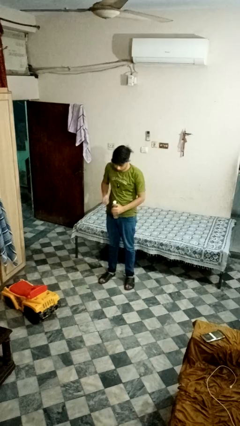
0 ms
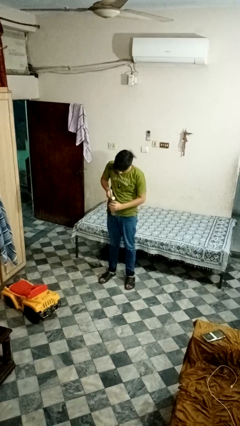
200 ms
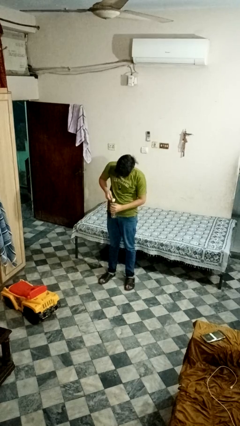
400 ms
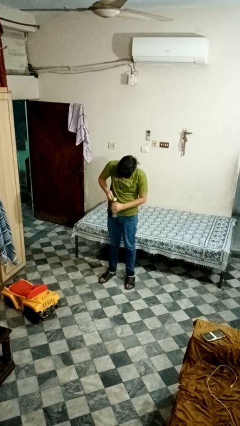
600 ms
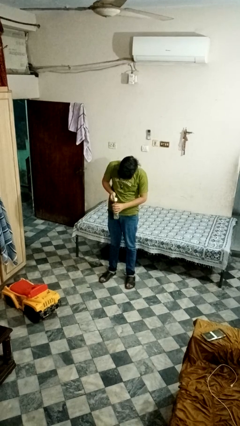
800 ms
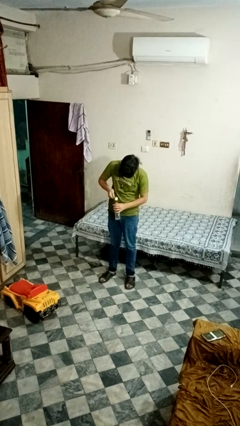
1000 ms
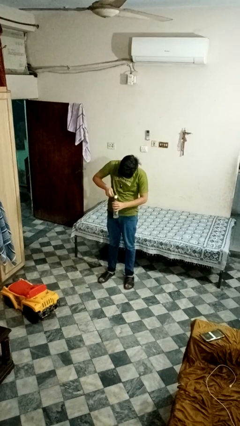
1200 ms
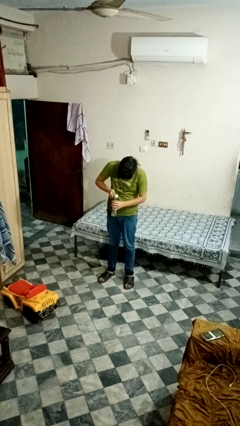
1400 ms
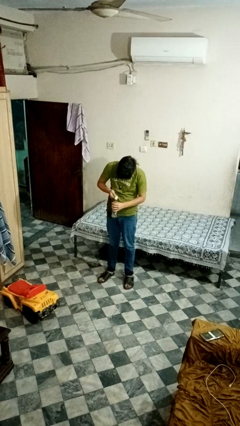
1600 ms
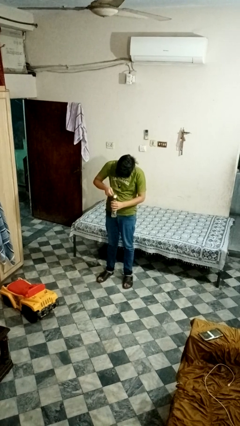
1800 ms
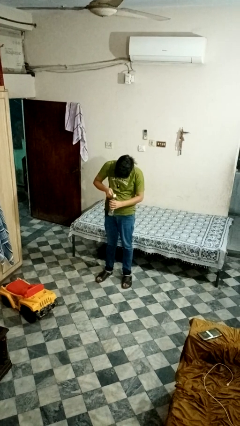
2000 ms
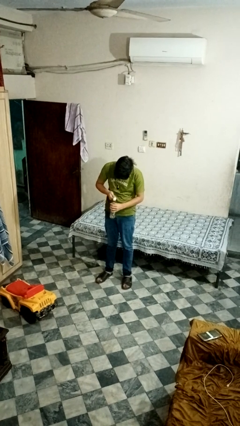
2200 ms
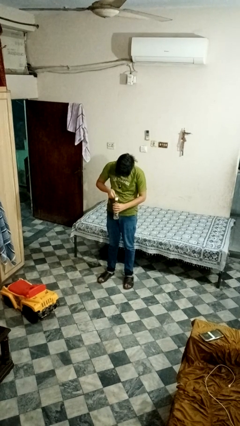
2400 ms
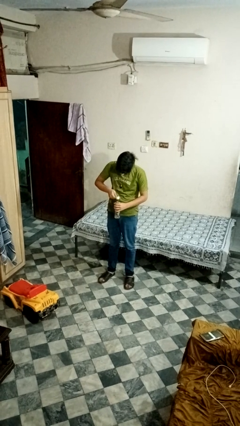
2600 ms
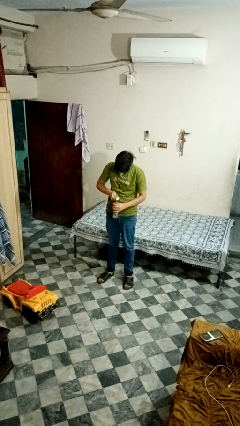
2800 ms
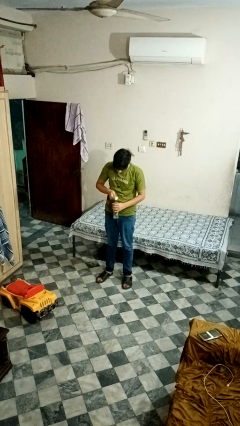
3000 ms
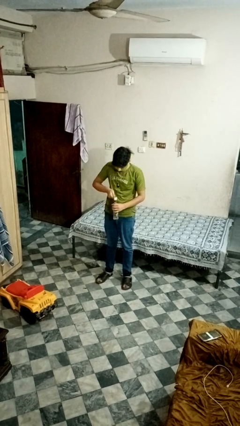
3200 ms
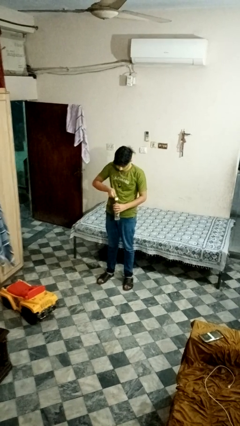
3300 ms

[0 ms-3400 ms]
person opens can with can opener

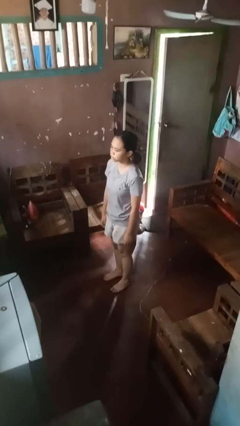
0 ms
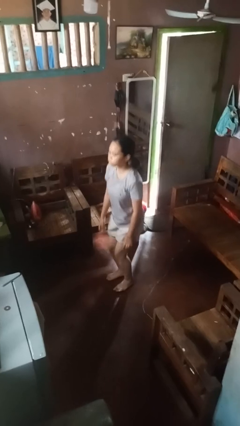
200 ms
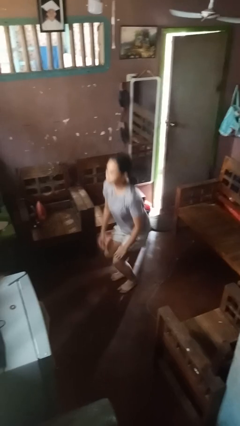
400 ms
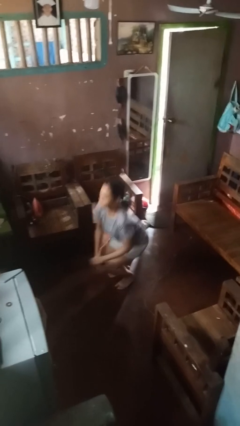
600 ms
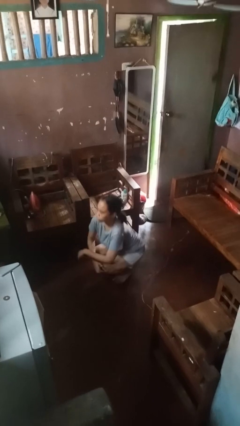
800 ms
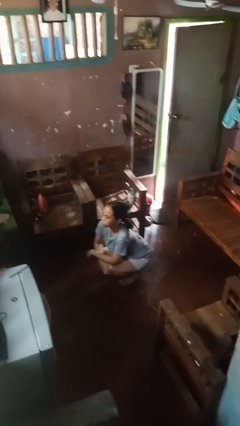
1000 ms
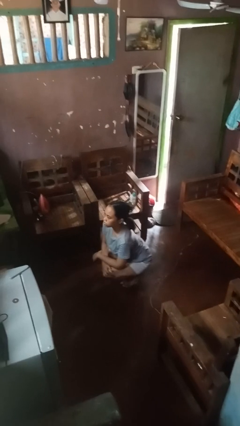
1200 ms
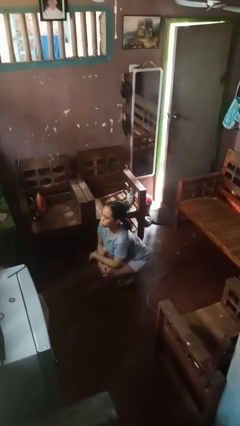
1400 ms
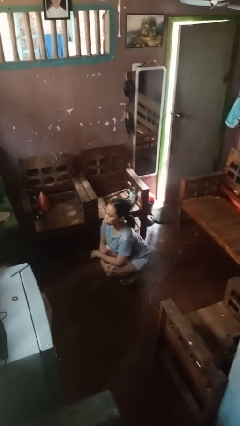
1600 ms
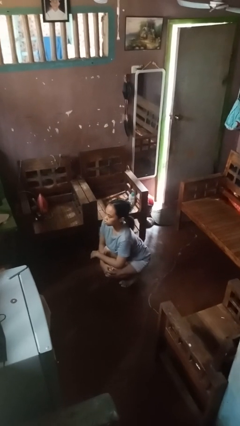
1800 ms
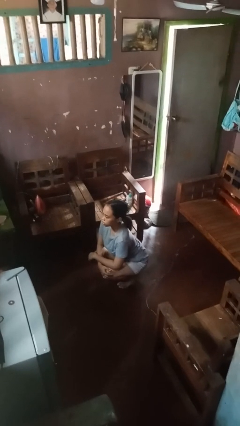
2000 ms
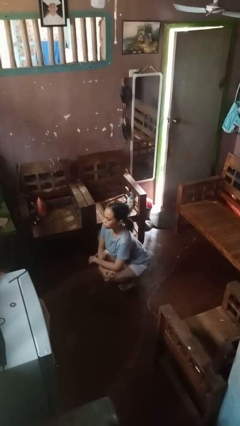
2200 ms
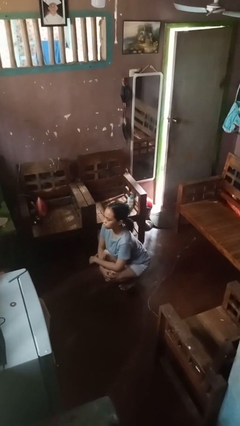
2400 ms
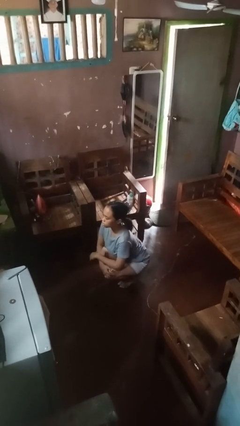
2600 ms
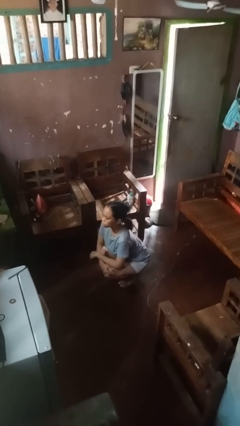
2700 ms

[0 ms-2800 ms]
person squats

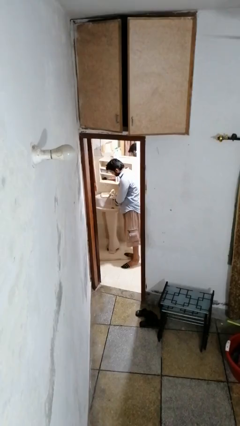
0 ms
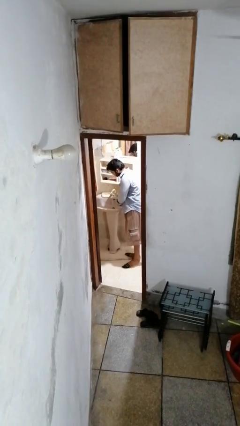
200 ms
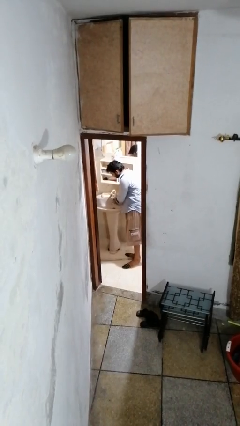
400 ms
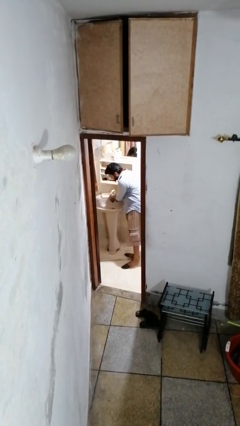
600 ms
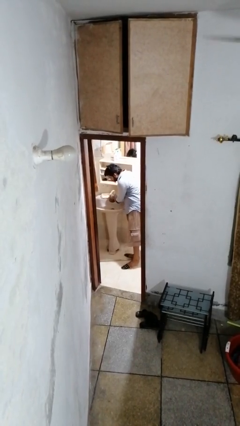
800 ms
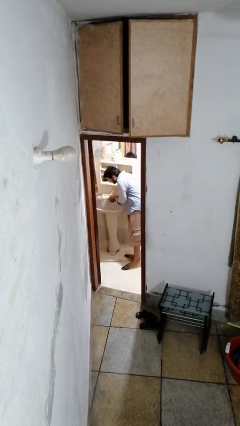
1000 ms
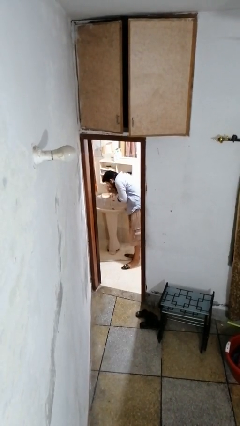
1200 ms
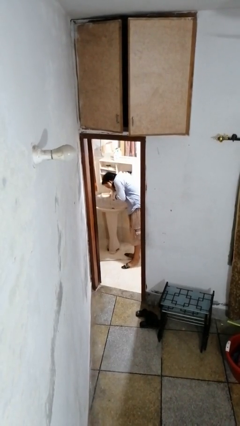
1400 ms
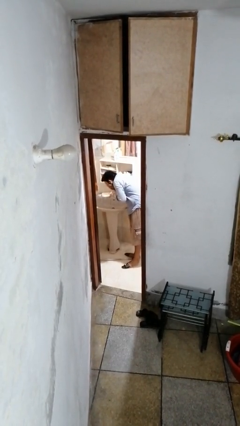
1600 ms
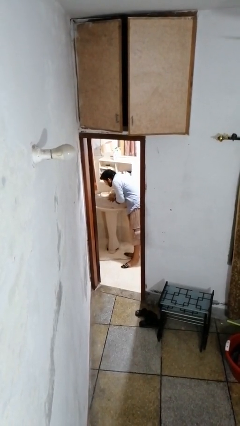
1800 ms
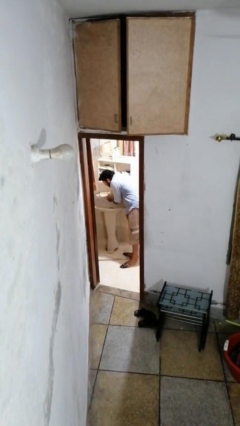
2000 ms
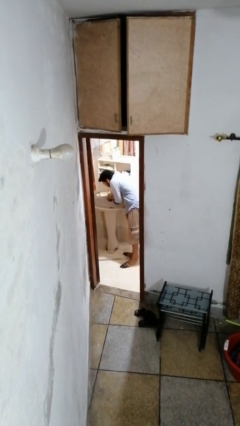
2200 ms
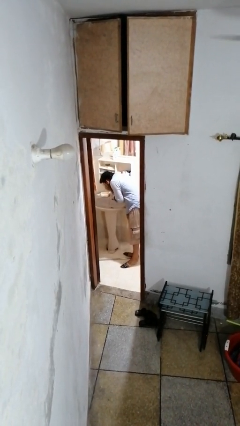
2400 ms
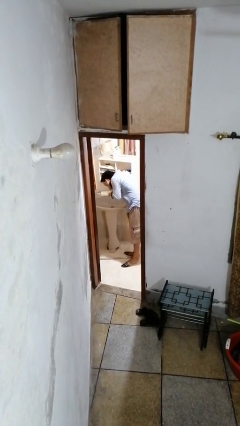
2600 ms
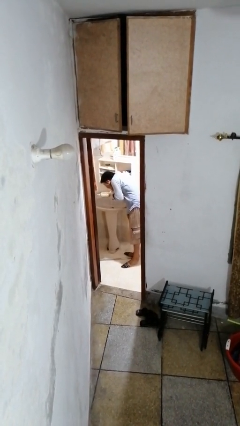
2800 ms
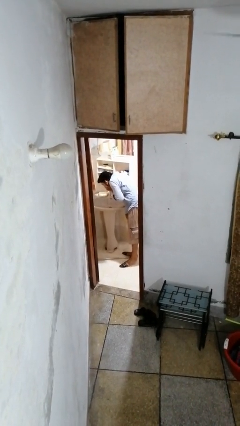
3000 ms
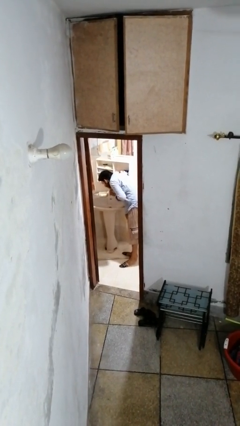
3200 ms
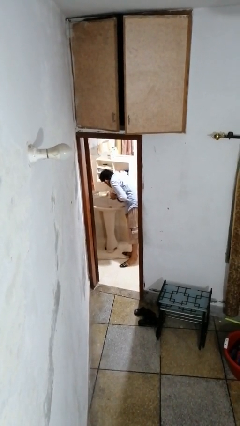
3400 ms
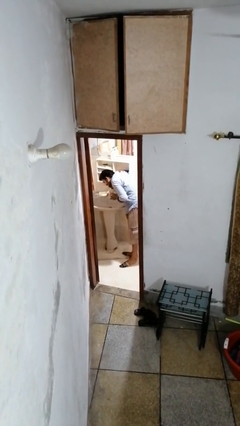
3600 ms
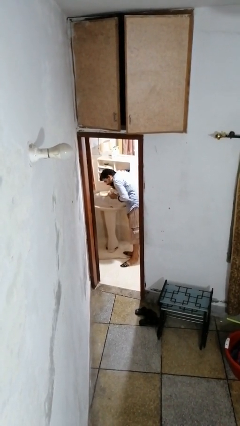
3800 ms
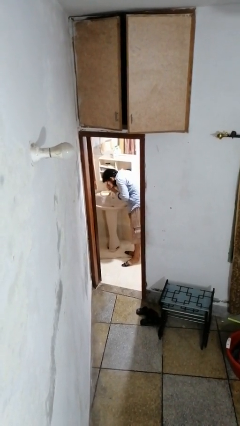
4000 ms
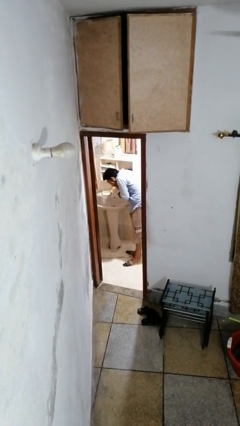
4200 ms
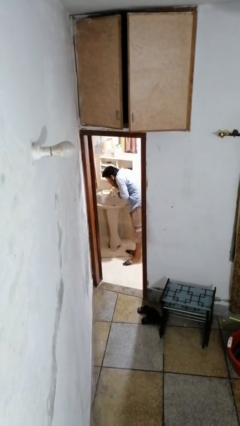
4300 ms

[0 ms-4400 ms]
person washes face

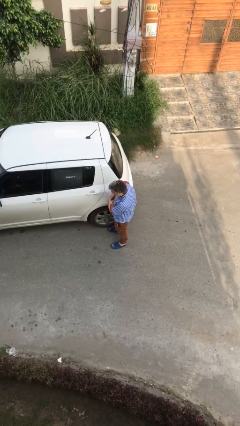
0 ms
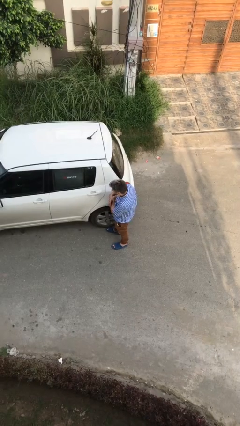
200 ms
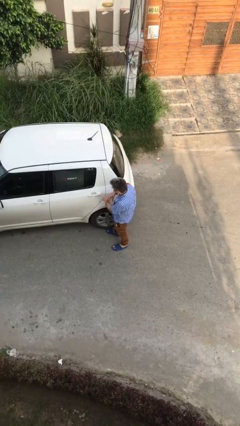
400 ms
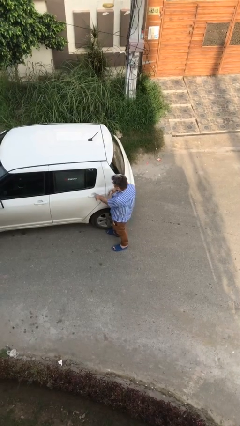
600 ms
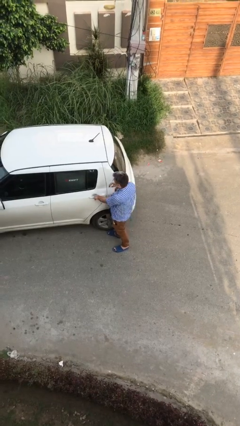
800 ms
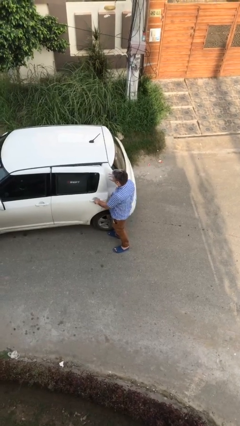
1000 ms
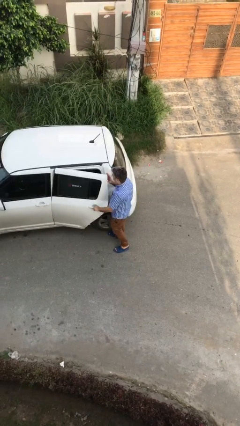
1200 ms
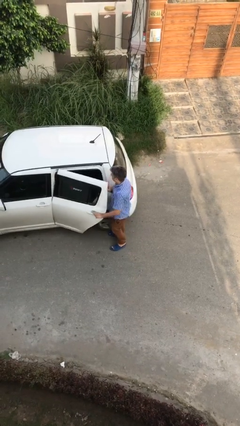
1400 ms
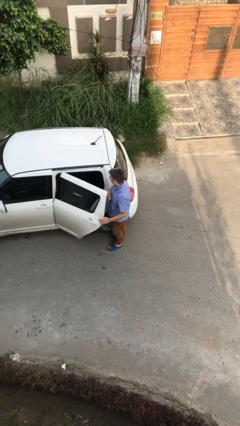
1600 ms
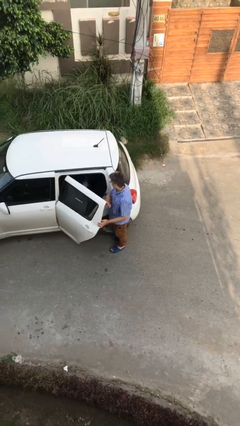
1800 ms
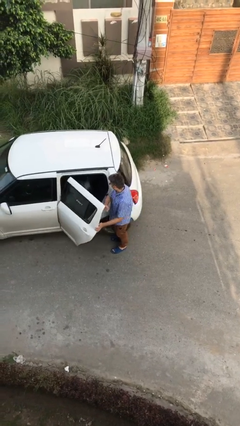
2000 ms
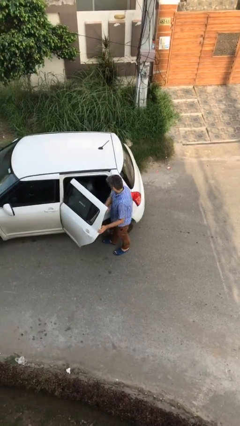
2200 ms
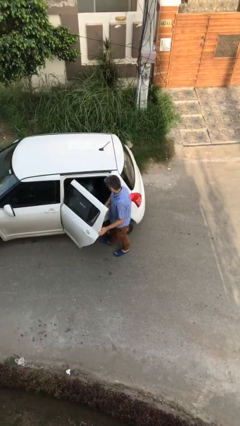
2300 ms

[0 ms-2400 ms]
person opens car door

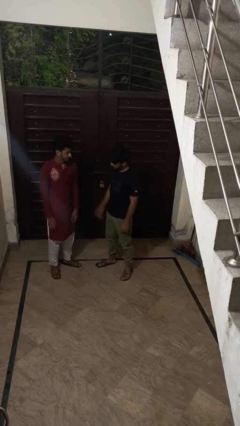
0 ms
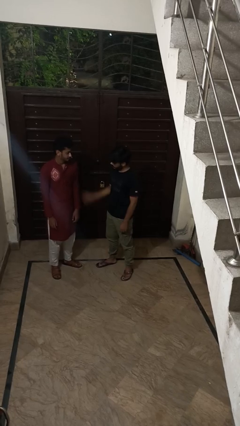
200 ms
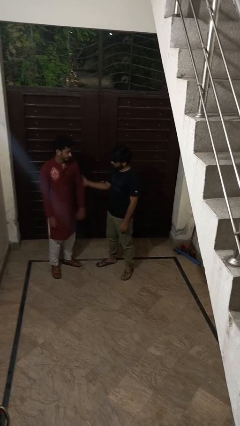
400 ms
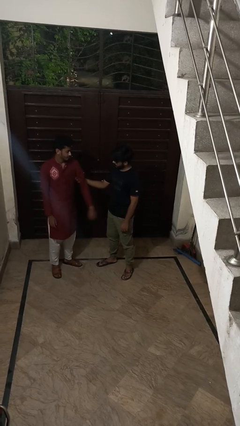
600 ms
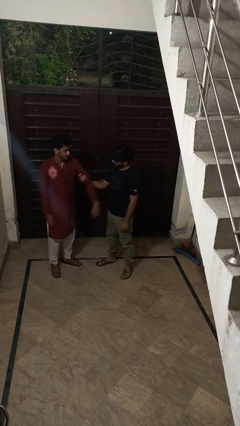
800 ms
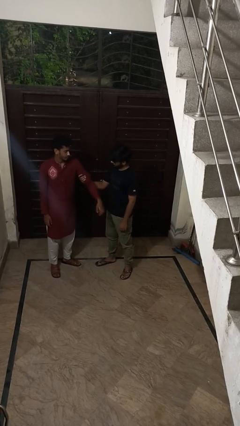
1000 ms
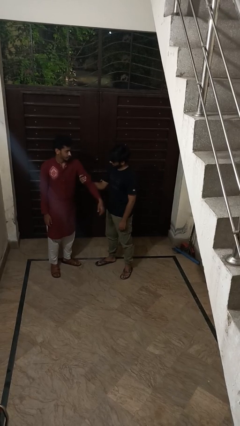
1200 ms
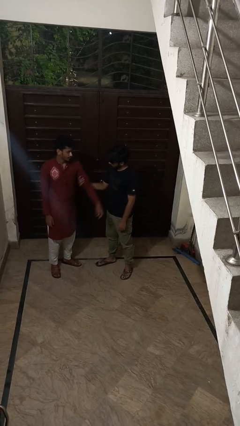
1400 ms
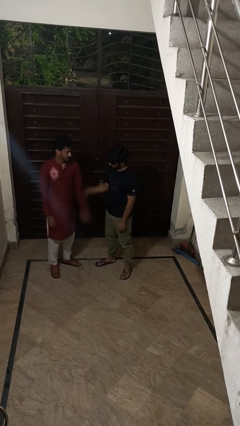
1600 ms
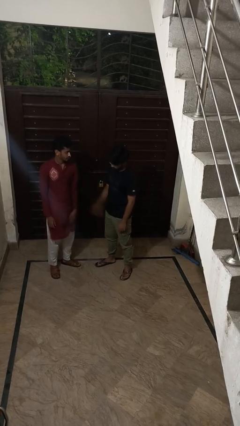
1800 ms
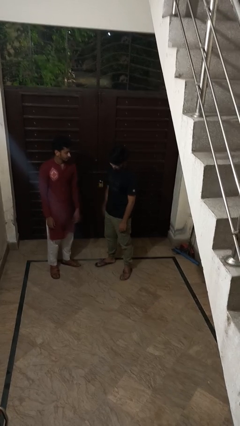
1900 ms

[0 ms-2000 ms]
person grabs person by bicep

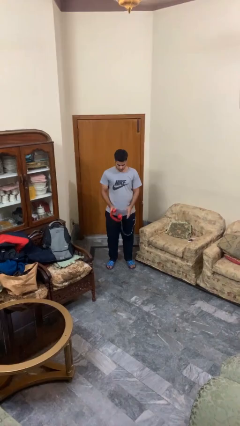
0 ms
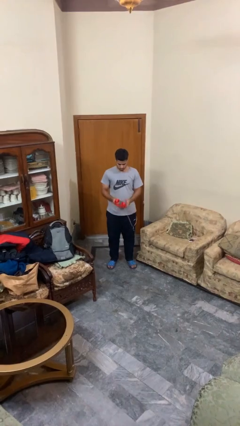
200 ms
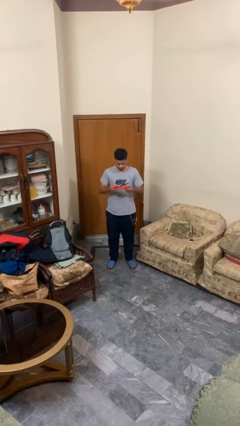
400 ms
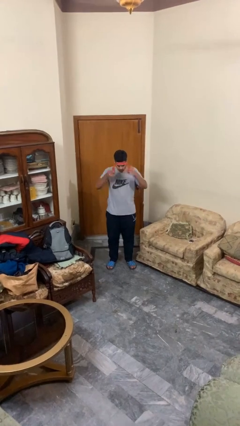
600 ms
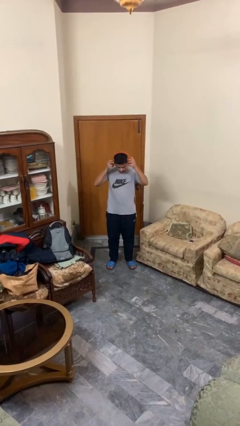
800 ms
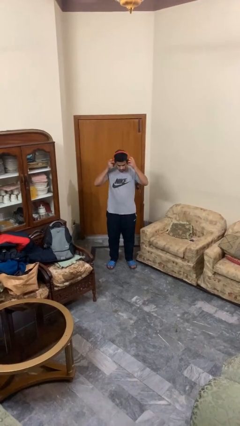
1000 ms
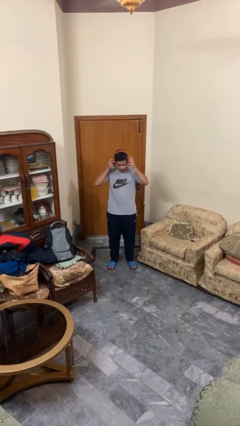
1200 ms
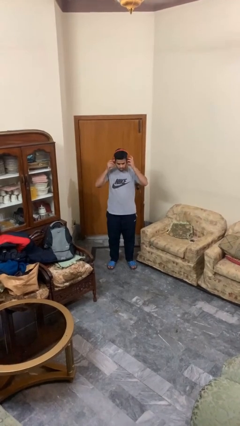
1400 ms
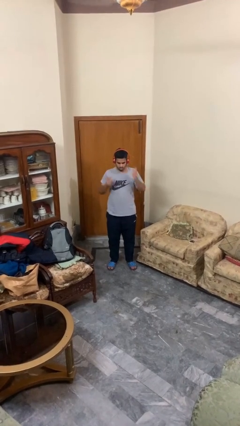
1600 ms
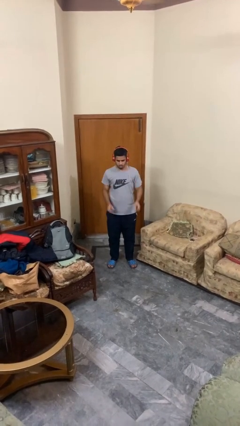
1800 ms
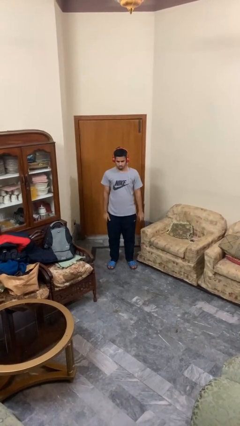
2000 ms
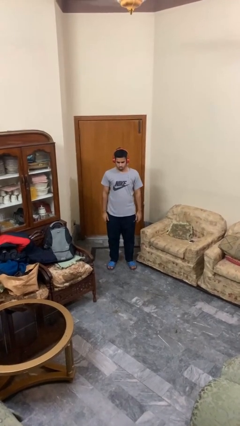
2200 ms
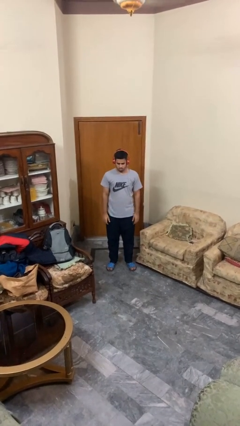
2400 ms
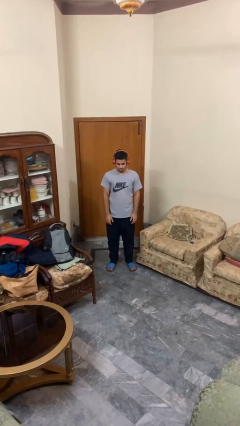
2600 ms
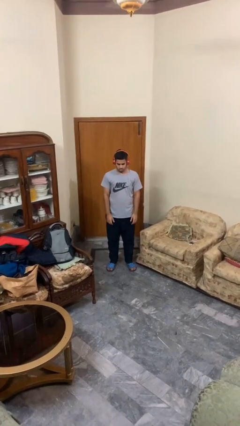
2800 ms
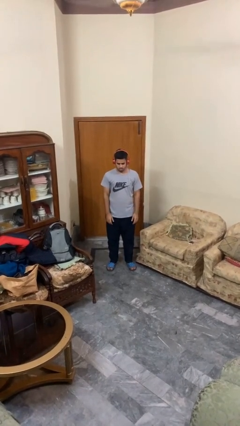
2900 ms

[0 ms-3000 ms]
person puts on headphones
